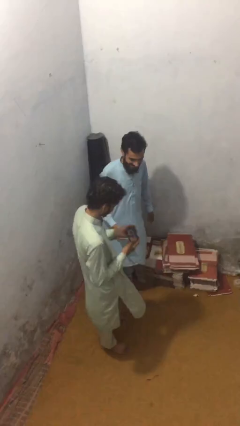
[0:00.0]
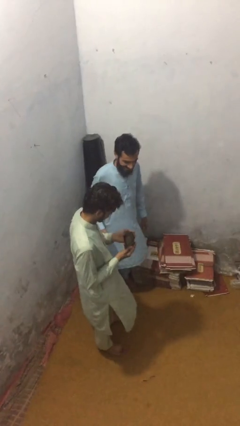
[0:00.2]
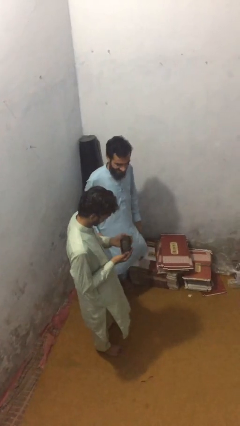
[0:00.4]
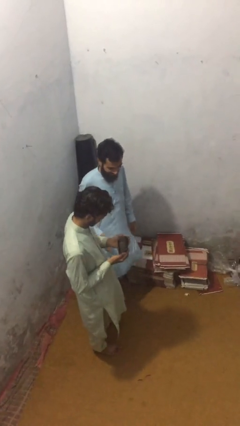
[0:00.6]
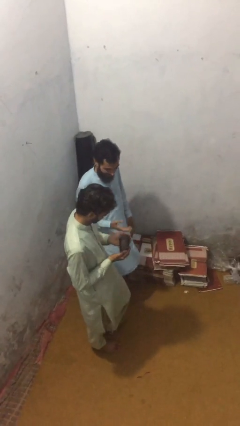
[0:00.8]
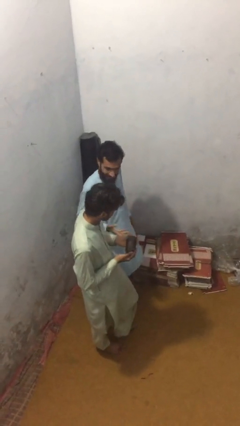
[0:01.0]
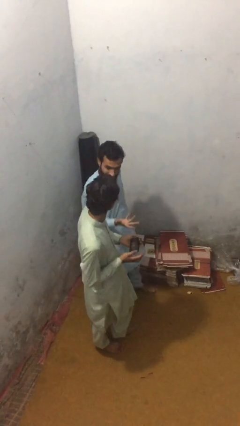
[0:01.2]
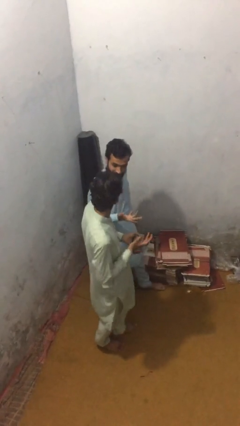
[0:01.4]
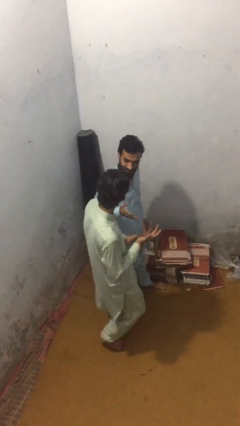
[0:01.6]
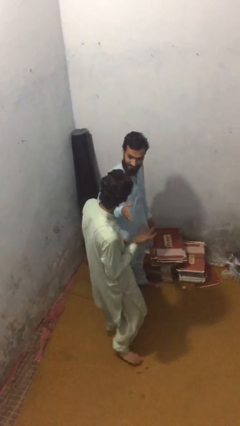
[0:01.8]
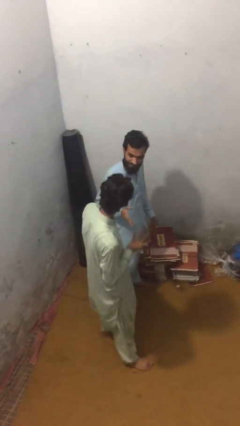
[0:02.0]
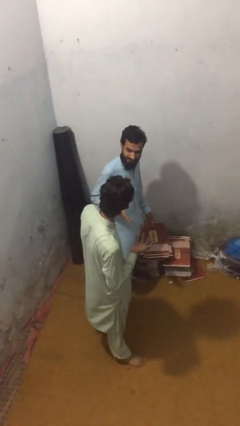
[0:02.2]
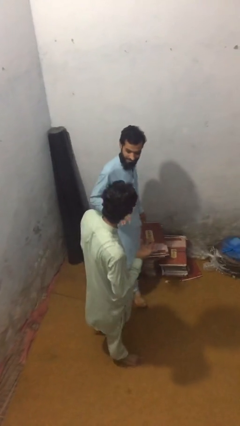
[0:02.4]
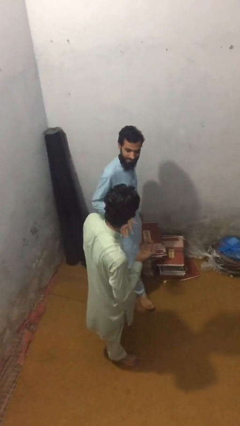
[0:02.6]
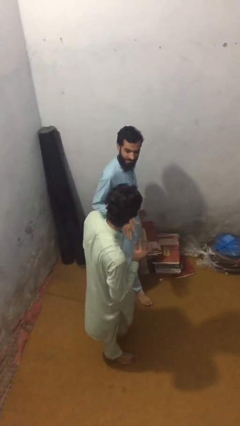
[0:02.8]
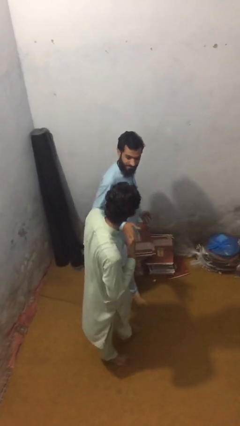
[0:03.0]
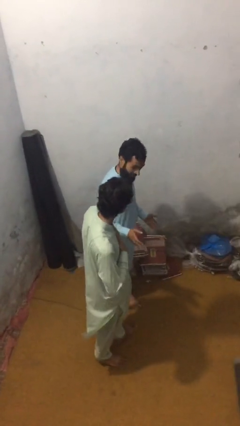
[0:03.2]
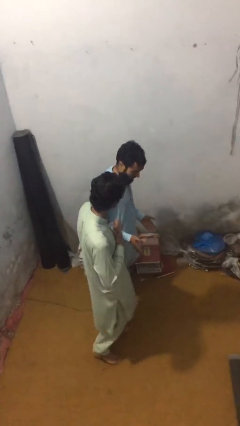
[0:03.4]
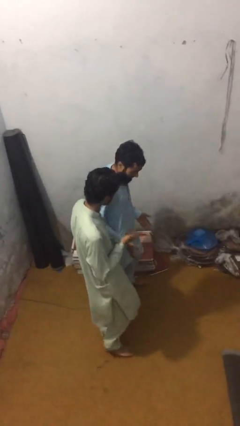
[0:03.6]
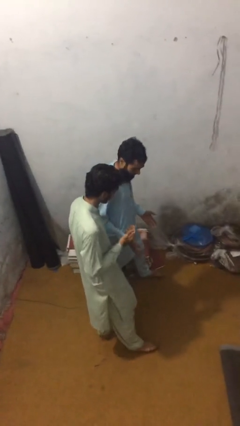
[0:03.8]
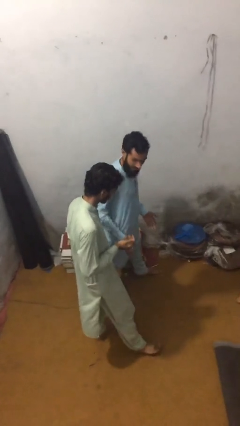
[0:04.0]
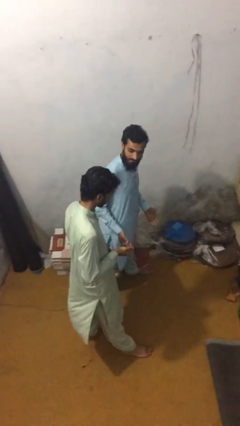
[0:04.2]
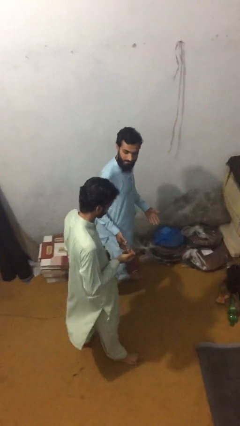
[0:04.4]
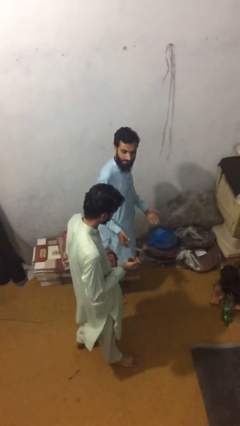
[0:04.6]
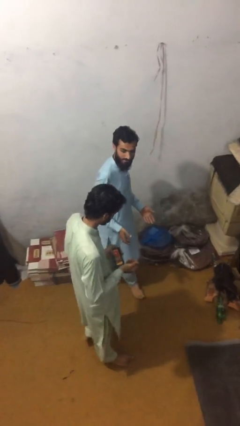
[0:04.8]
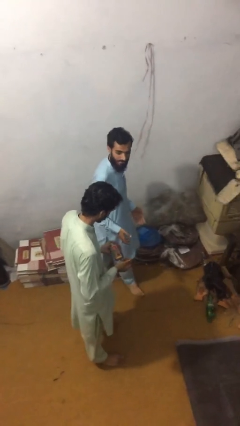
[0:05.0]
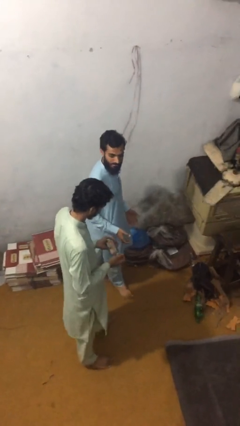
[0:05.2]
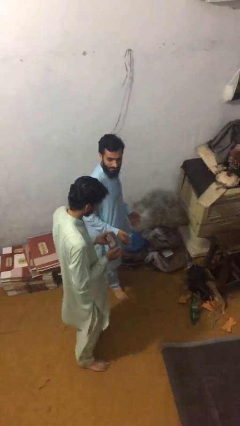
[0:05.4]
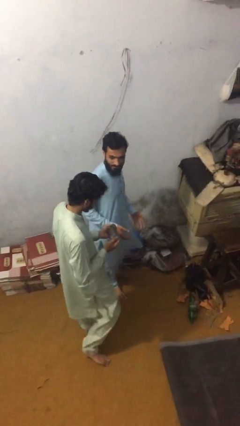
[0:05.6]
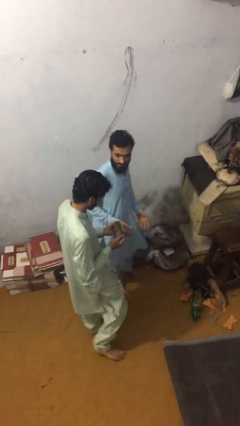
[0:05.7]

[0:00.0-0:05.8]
person talks to person

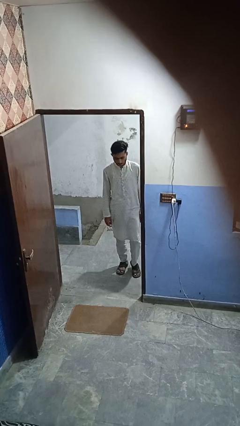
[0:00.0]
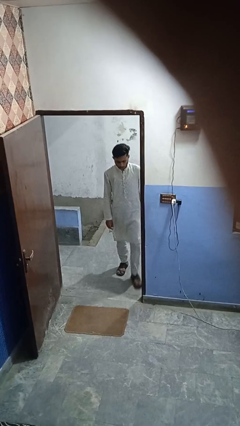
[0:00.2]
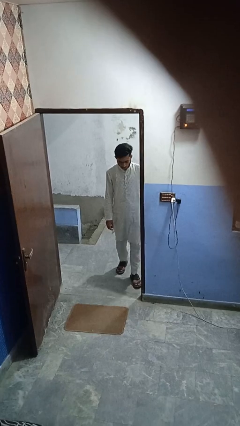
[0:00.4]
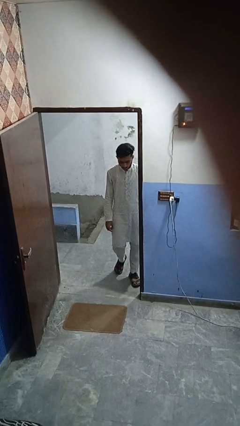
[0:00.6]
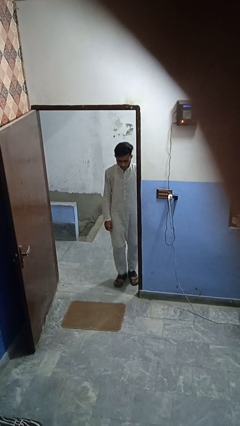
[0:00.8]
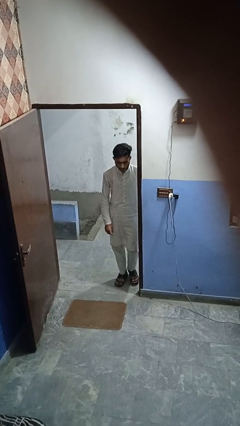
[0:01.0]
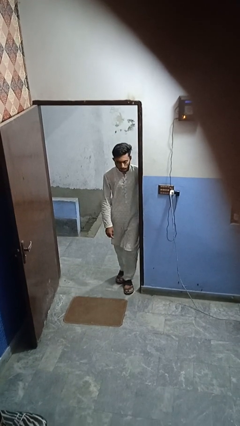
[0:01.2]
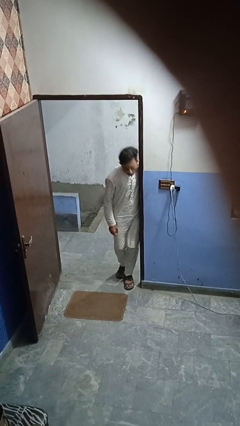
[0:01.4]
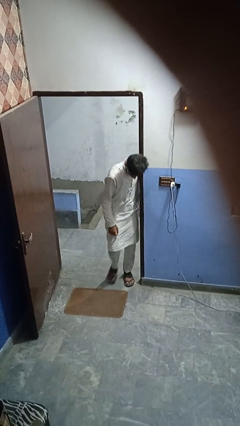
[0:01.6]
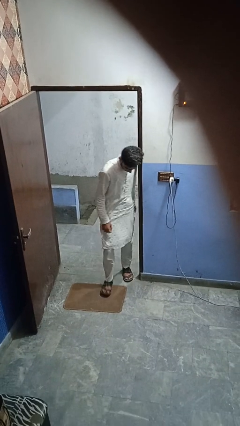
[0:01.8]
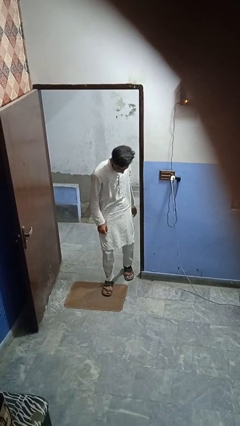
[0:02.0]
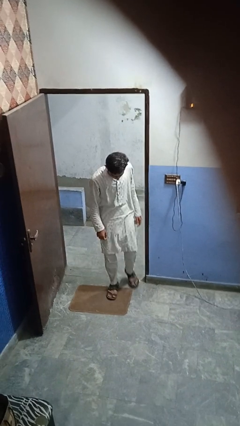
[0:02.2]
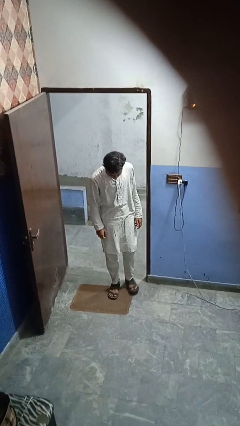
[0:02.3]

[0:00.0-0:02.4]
person bumps into wall

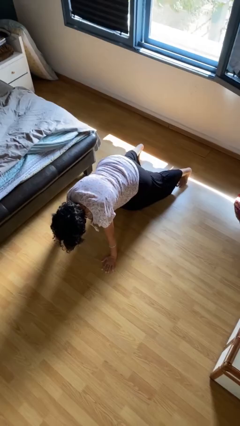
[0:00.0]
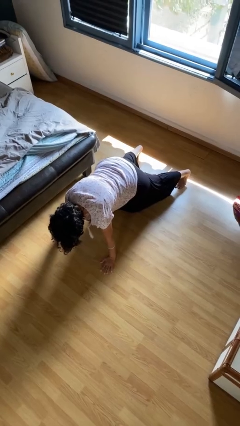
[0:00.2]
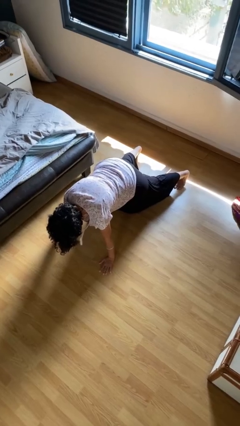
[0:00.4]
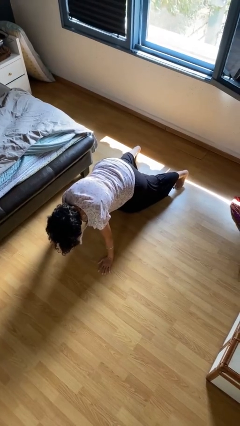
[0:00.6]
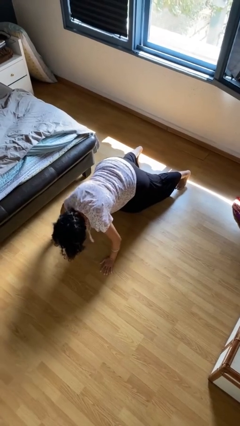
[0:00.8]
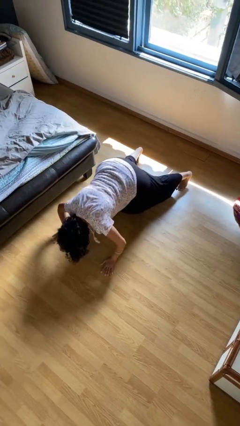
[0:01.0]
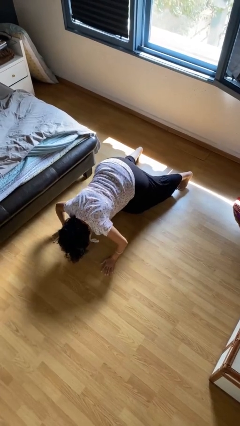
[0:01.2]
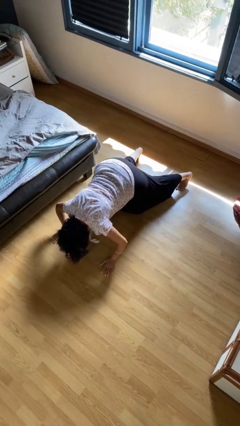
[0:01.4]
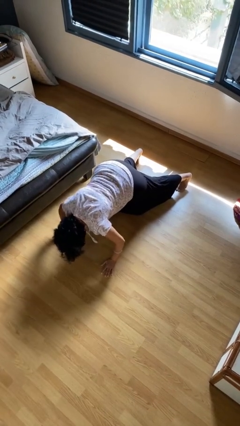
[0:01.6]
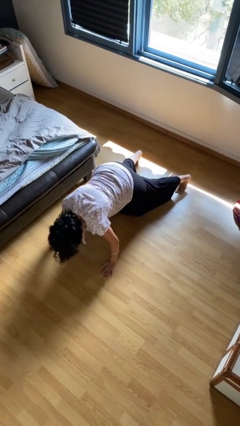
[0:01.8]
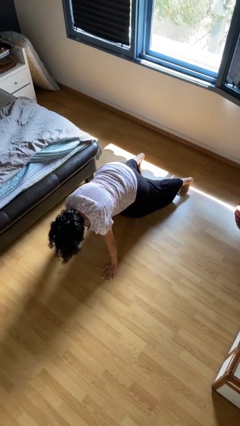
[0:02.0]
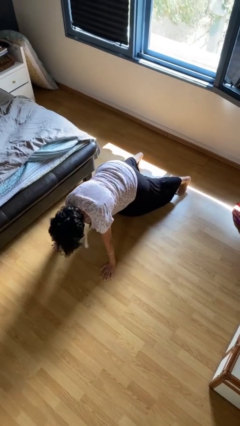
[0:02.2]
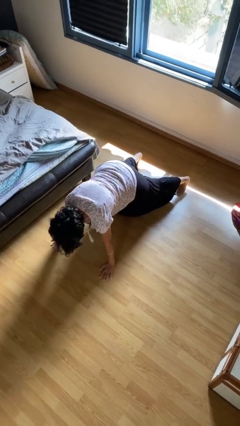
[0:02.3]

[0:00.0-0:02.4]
person exercises with pushup

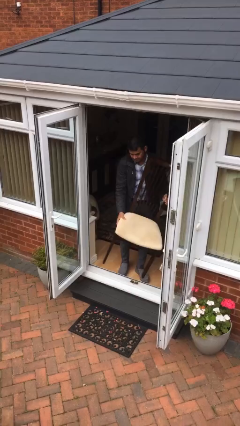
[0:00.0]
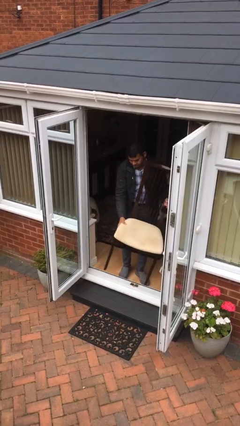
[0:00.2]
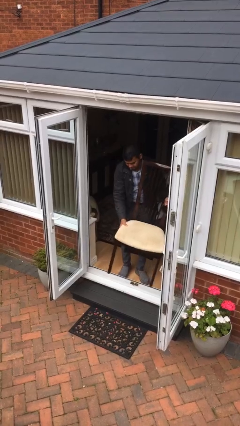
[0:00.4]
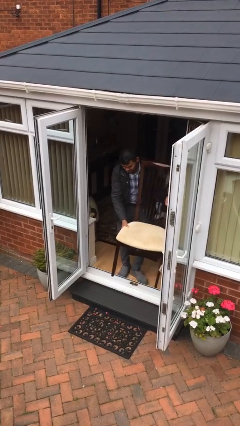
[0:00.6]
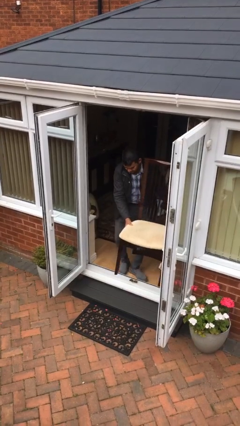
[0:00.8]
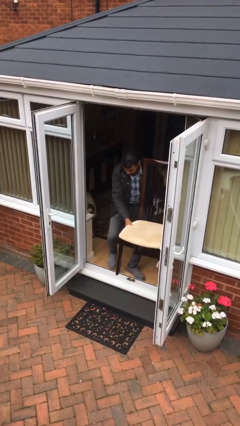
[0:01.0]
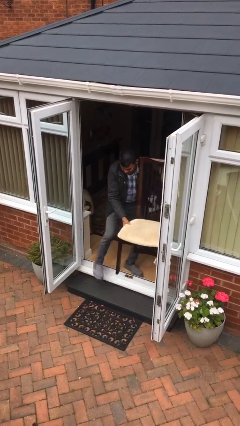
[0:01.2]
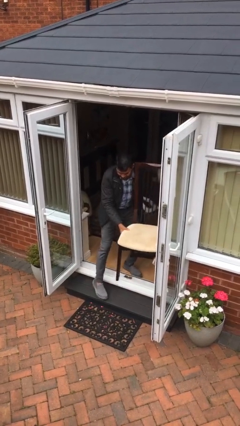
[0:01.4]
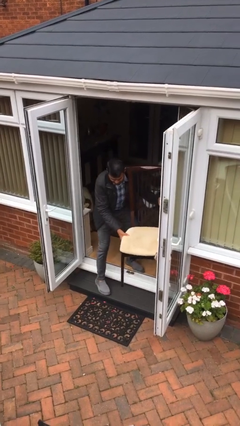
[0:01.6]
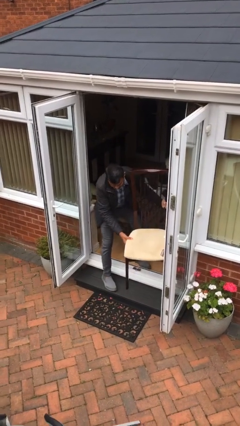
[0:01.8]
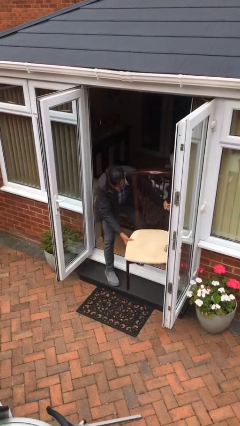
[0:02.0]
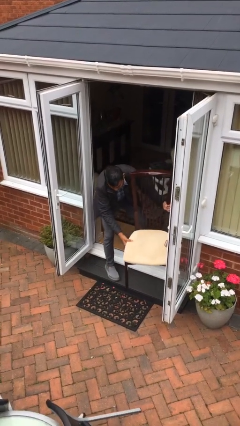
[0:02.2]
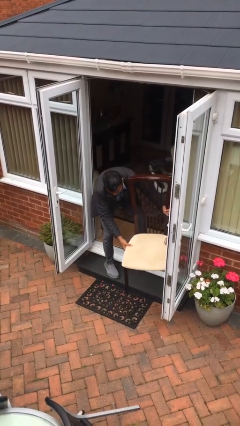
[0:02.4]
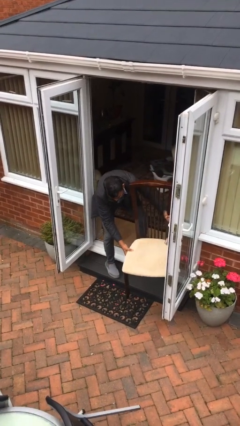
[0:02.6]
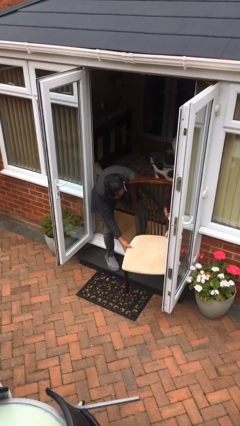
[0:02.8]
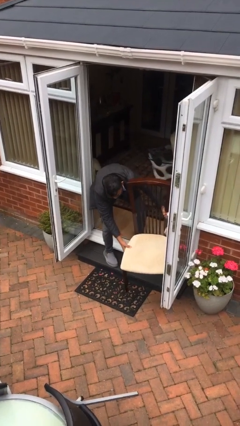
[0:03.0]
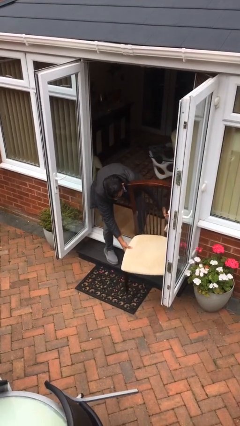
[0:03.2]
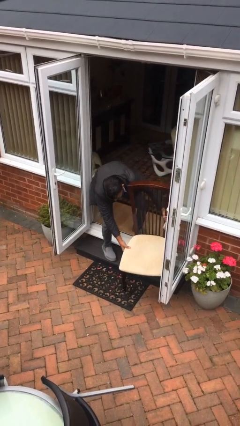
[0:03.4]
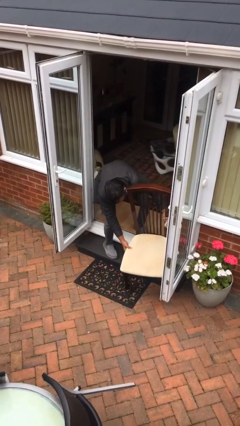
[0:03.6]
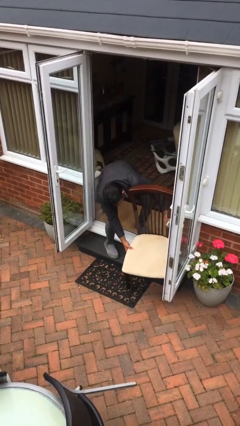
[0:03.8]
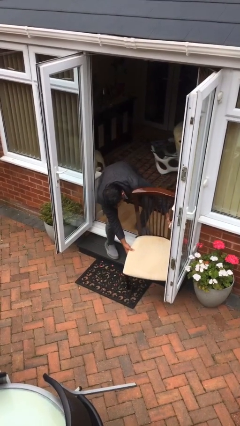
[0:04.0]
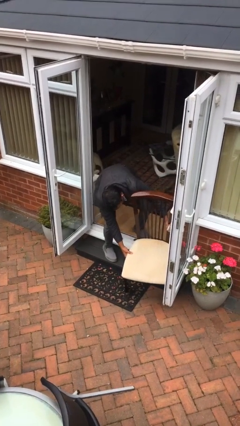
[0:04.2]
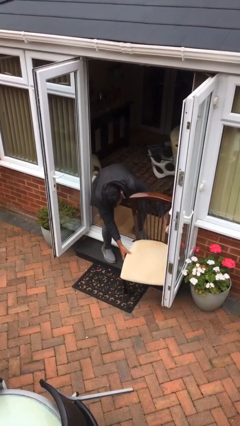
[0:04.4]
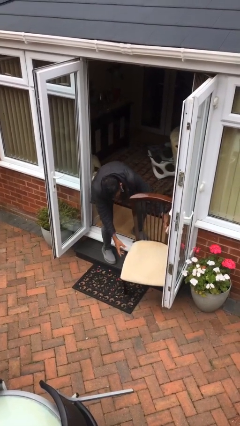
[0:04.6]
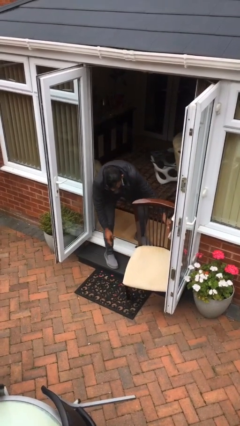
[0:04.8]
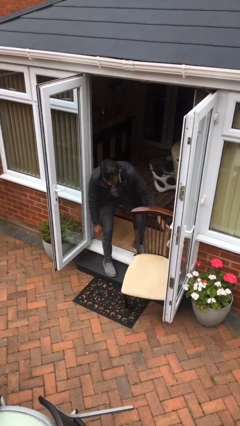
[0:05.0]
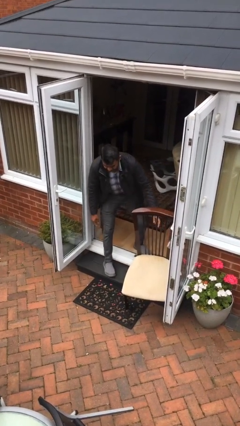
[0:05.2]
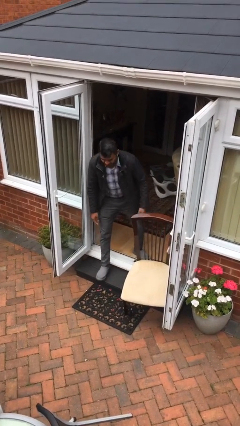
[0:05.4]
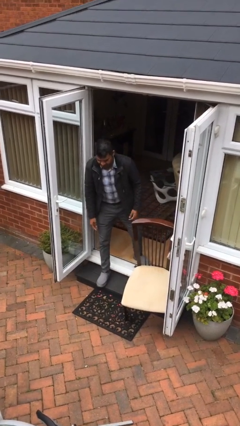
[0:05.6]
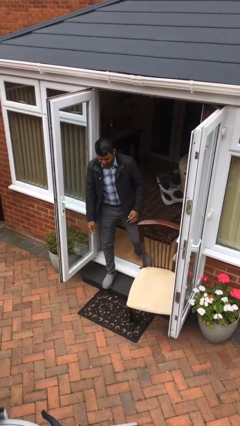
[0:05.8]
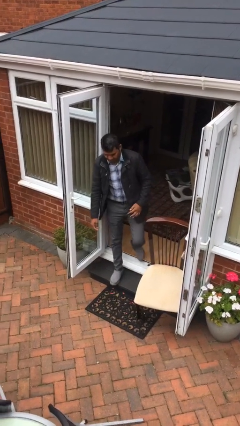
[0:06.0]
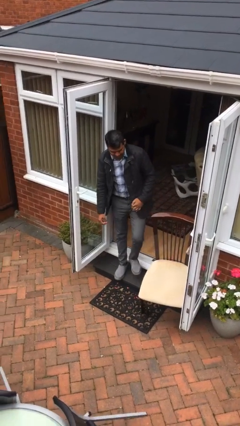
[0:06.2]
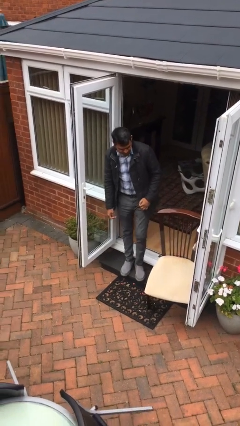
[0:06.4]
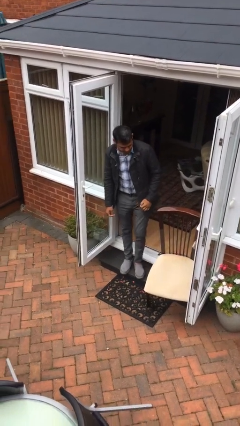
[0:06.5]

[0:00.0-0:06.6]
person puts down object on floor

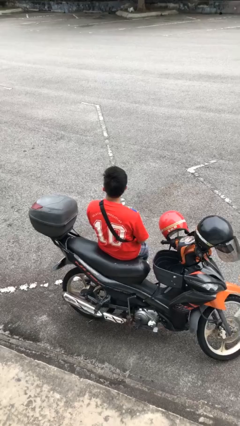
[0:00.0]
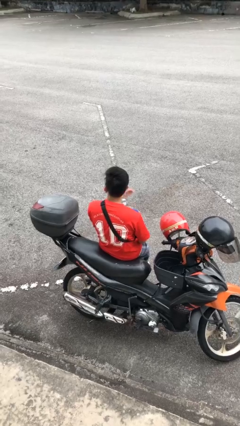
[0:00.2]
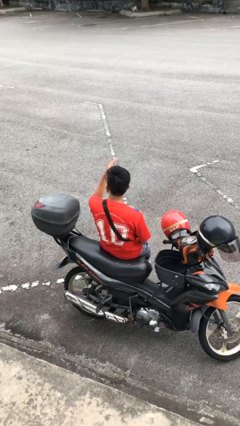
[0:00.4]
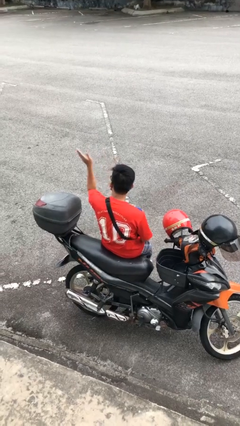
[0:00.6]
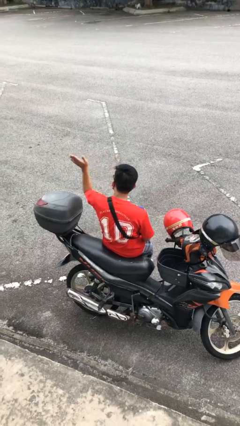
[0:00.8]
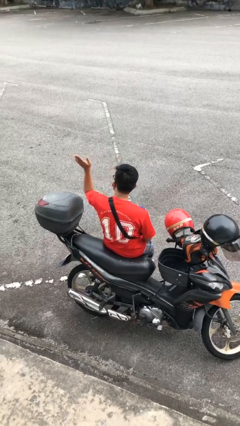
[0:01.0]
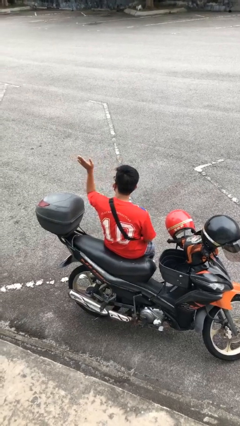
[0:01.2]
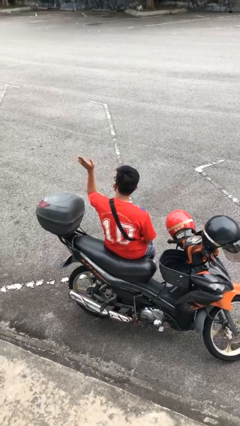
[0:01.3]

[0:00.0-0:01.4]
person gestures swipe left
